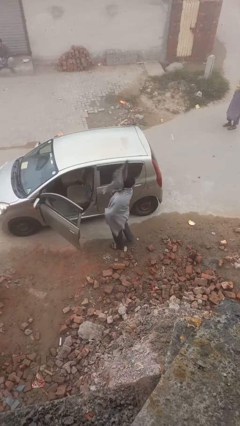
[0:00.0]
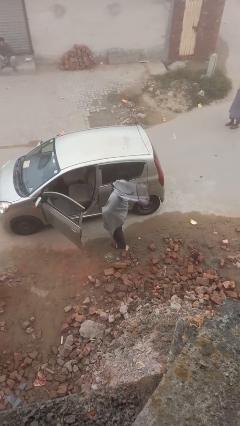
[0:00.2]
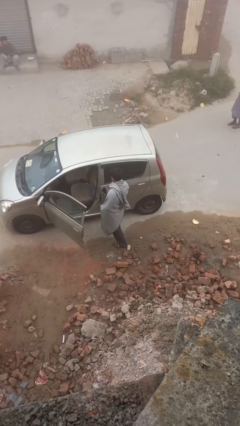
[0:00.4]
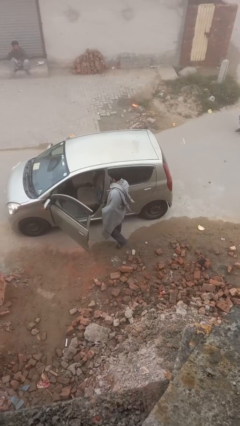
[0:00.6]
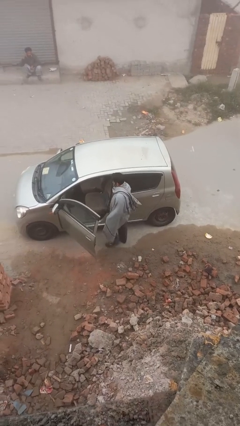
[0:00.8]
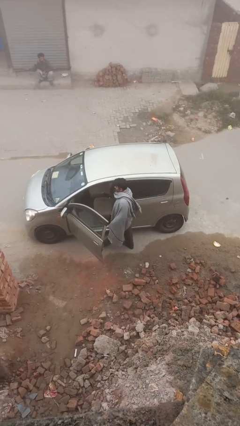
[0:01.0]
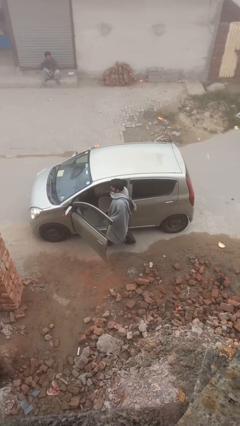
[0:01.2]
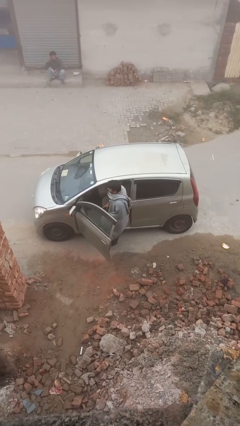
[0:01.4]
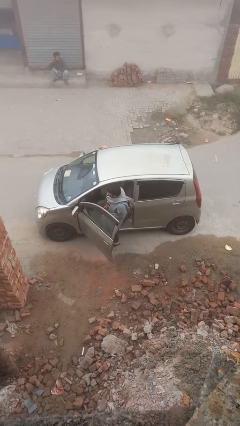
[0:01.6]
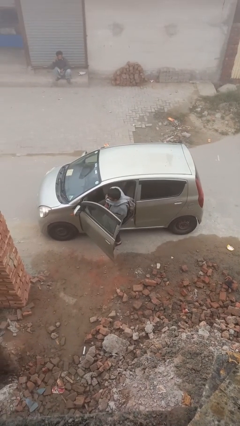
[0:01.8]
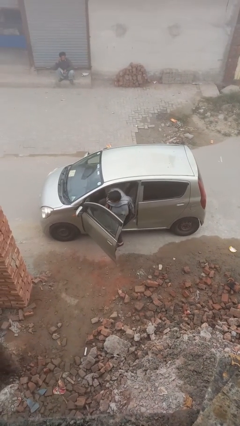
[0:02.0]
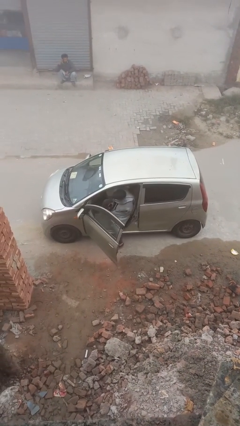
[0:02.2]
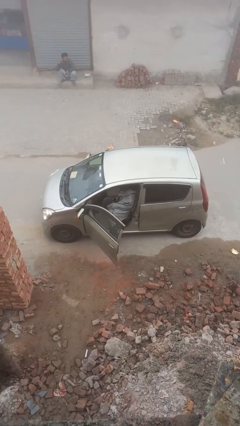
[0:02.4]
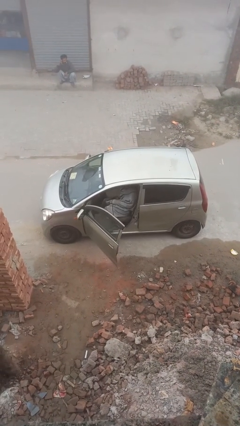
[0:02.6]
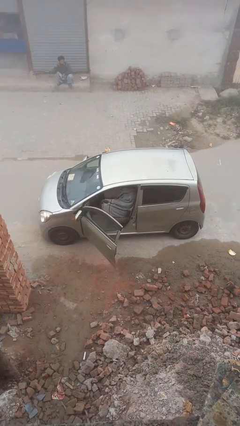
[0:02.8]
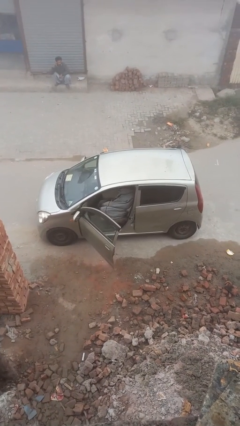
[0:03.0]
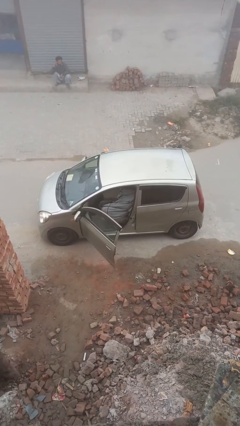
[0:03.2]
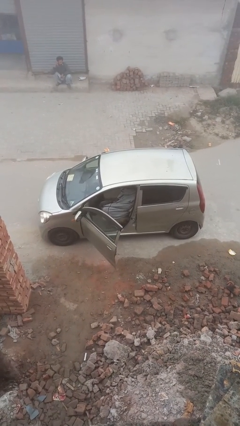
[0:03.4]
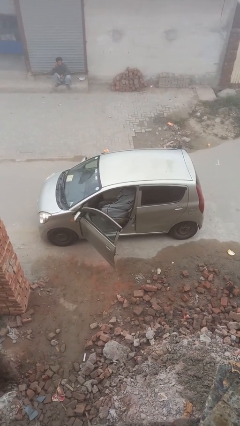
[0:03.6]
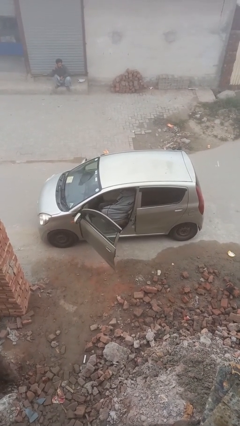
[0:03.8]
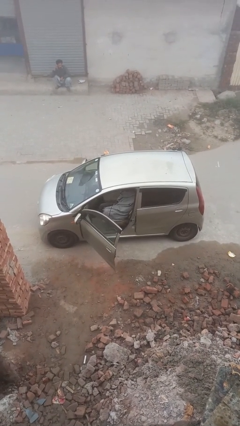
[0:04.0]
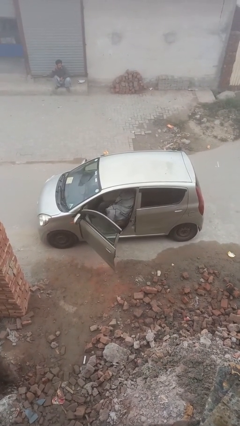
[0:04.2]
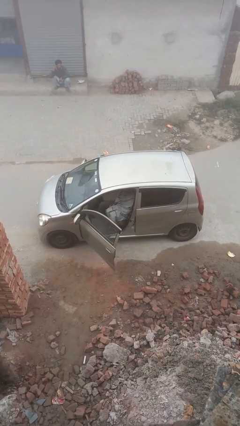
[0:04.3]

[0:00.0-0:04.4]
person enters car

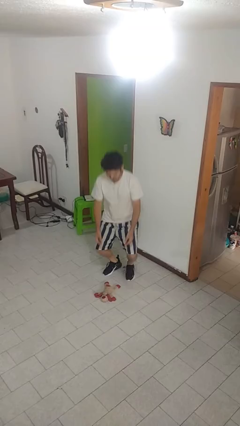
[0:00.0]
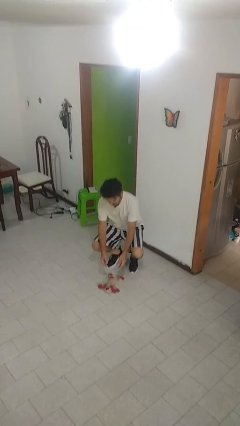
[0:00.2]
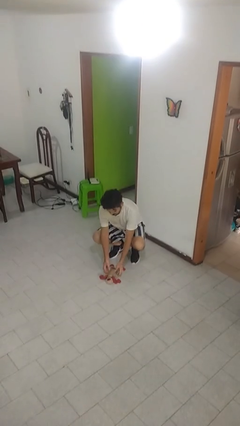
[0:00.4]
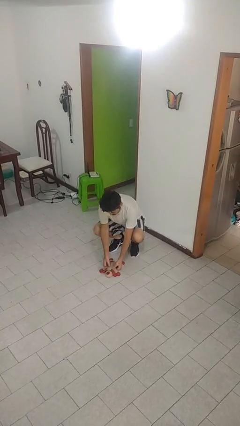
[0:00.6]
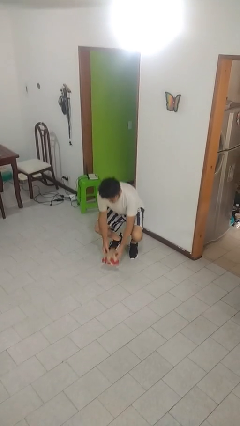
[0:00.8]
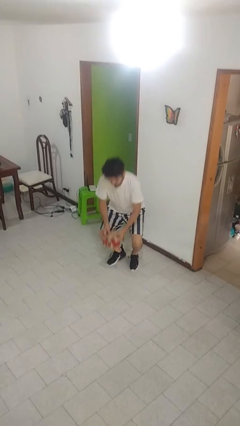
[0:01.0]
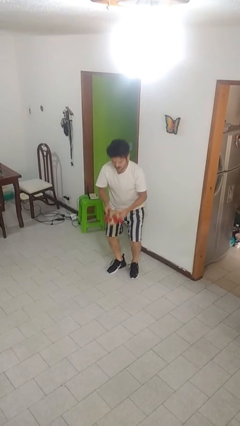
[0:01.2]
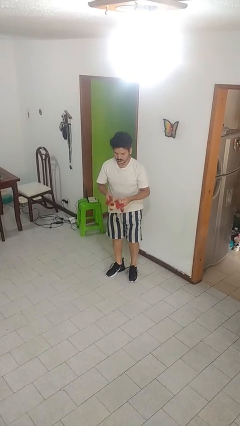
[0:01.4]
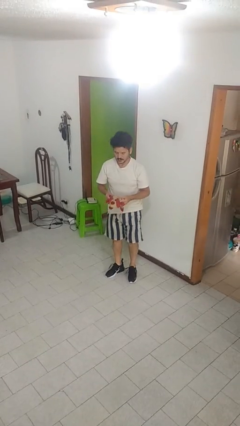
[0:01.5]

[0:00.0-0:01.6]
person picks up object from floor

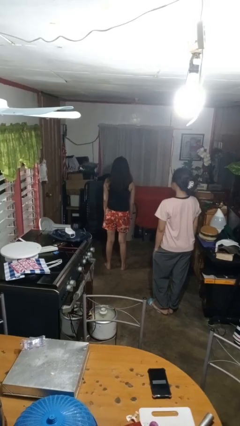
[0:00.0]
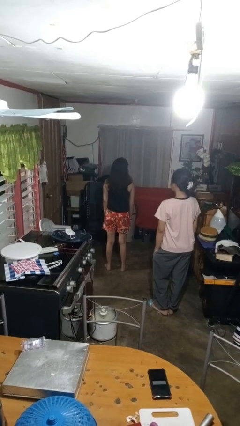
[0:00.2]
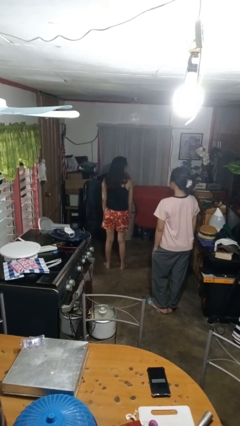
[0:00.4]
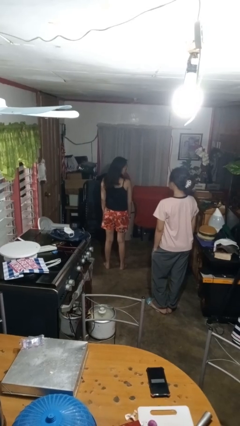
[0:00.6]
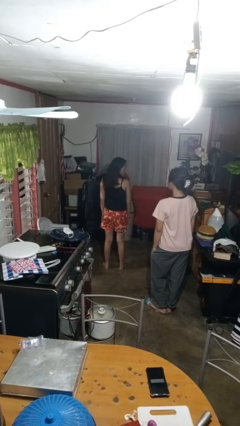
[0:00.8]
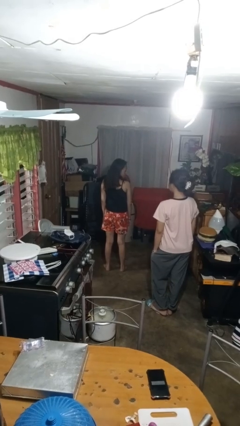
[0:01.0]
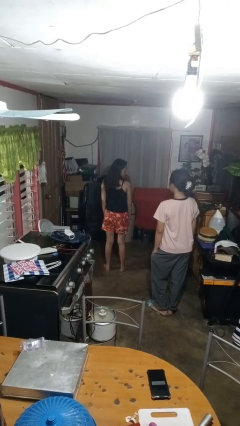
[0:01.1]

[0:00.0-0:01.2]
person looks over shoulder

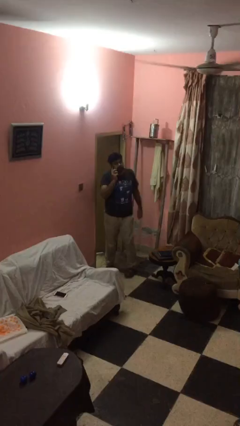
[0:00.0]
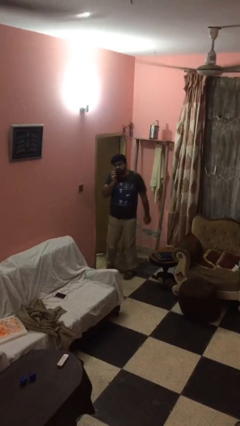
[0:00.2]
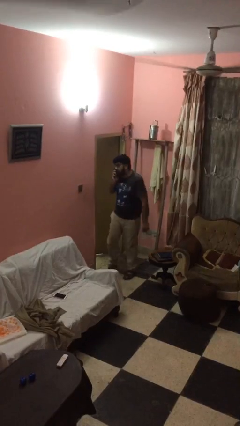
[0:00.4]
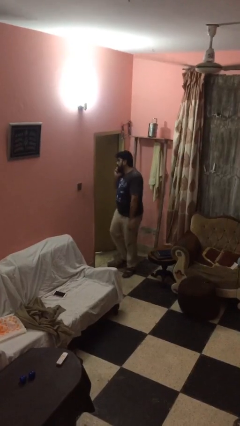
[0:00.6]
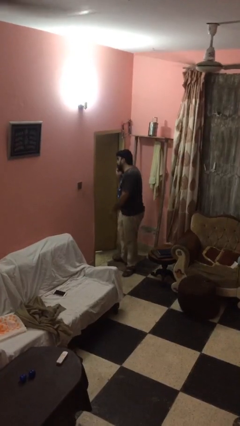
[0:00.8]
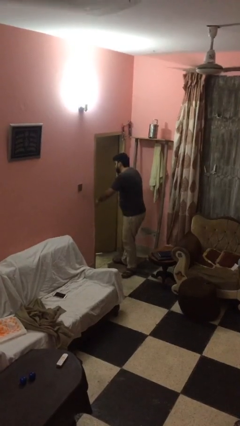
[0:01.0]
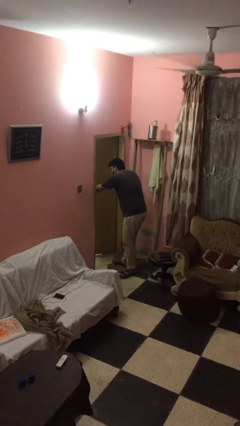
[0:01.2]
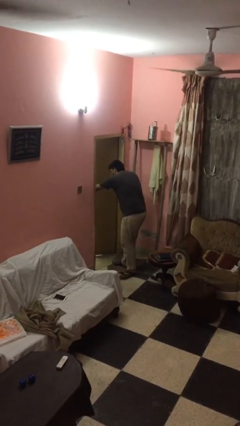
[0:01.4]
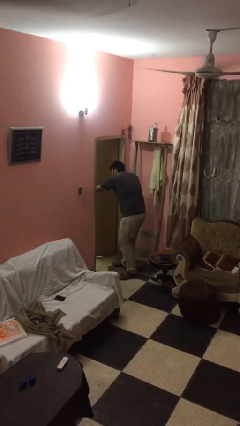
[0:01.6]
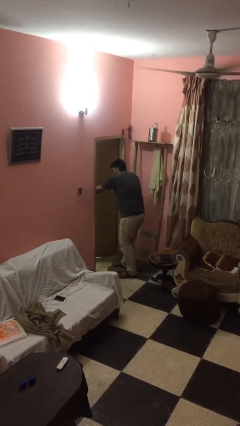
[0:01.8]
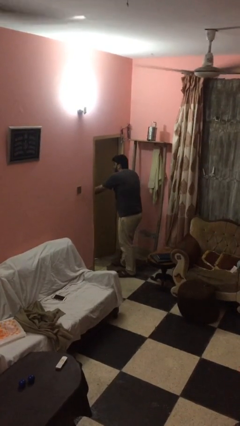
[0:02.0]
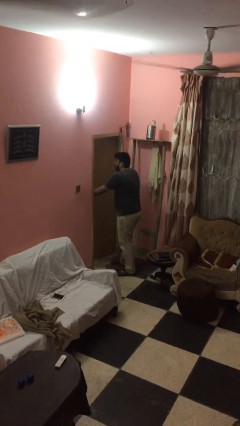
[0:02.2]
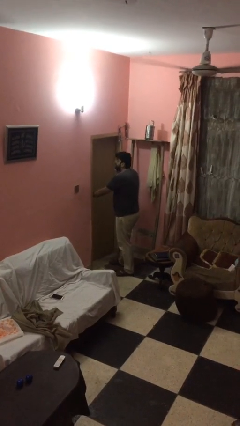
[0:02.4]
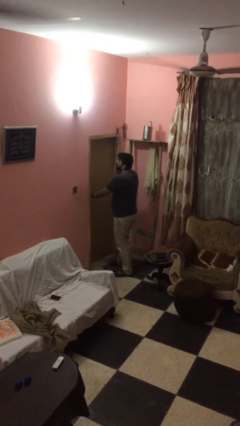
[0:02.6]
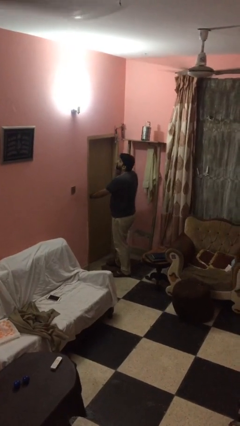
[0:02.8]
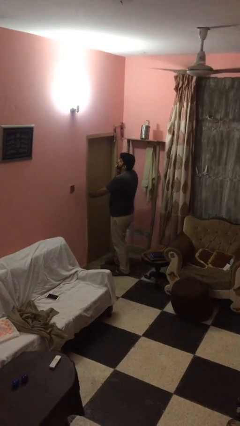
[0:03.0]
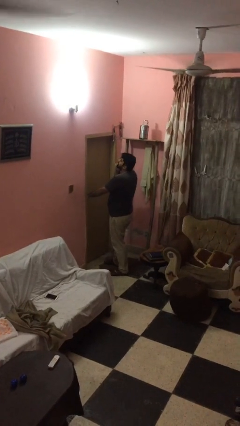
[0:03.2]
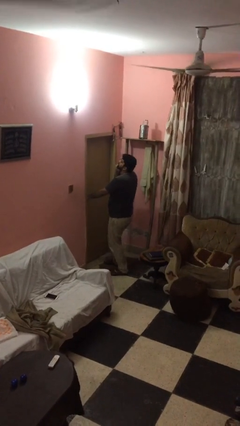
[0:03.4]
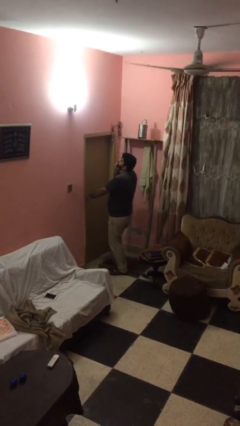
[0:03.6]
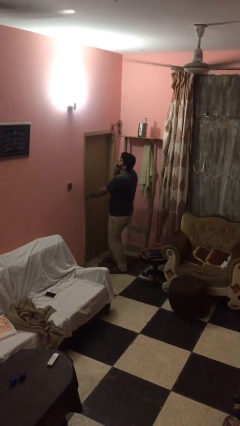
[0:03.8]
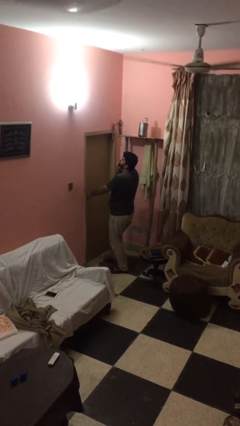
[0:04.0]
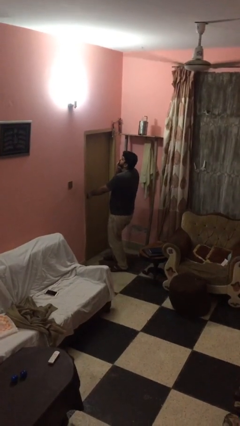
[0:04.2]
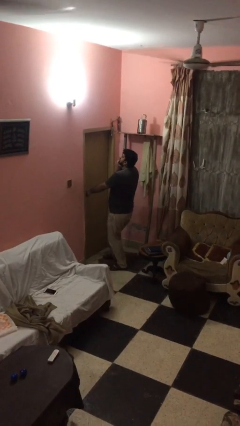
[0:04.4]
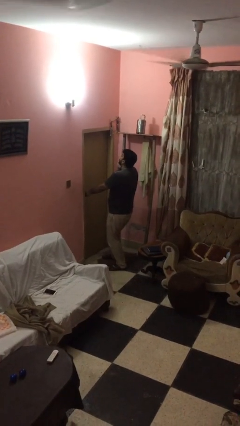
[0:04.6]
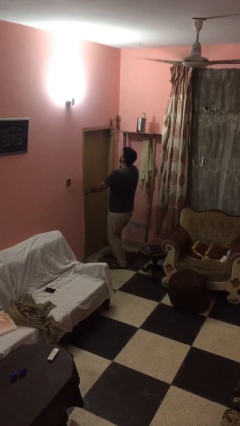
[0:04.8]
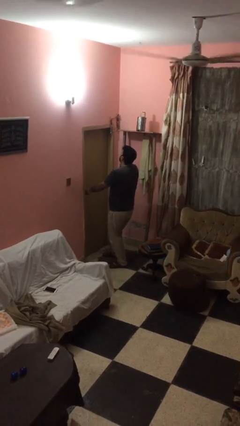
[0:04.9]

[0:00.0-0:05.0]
person closes facility door

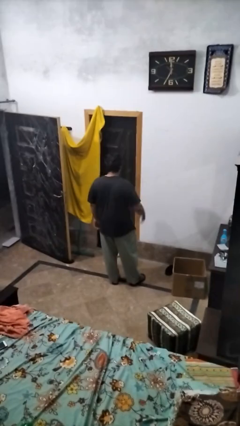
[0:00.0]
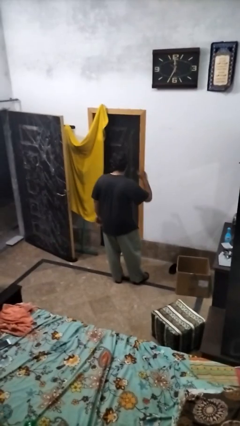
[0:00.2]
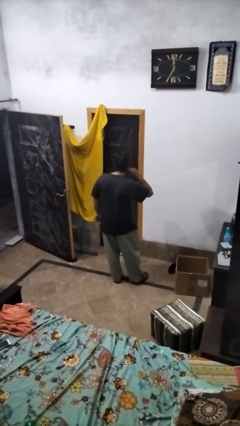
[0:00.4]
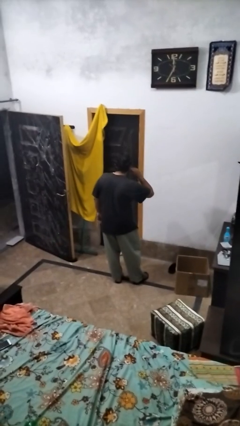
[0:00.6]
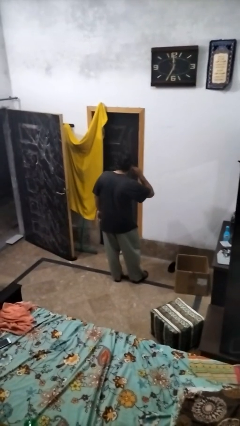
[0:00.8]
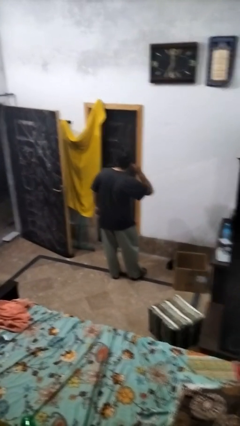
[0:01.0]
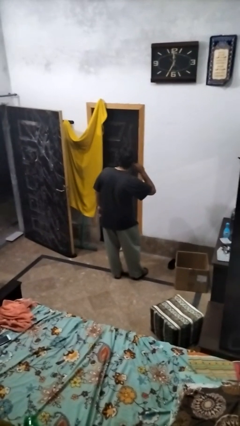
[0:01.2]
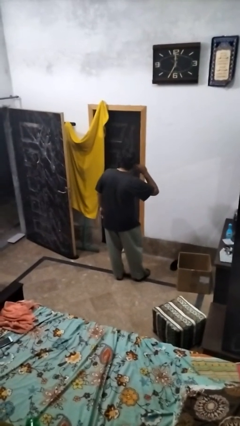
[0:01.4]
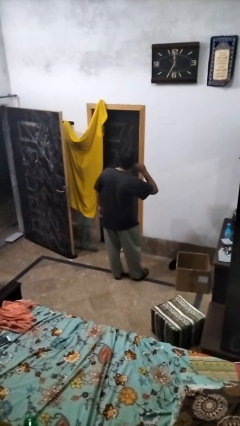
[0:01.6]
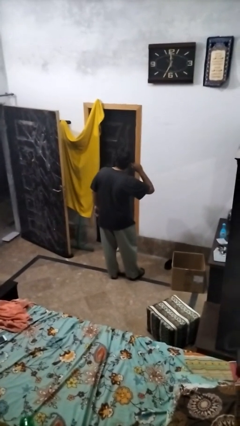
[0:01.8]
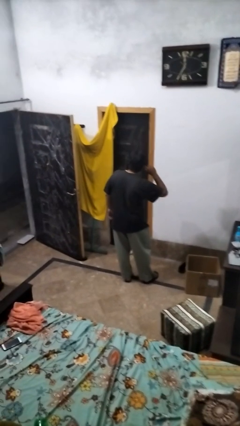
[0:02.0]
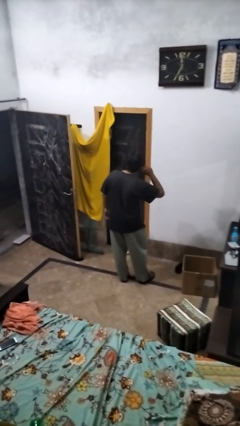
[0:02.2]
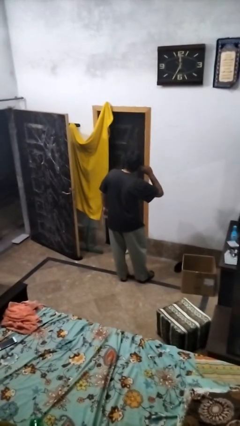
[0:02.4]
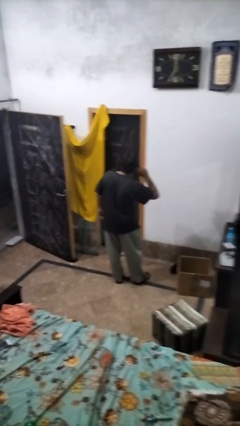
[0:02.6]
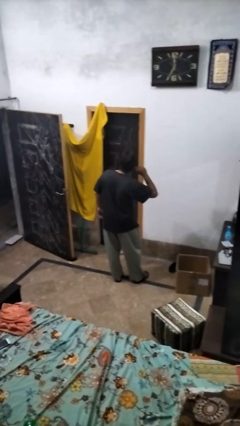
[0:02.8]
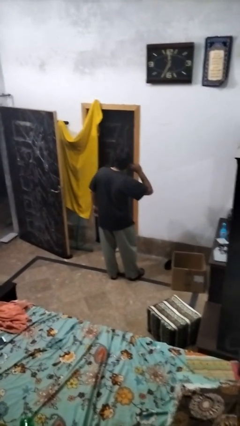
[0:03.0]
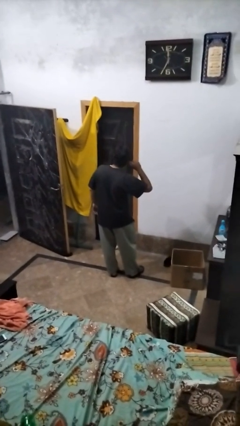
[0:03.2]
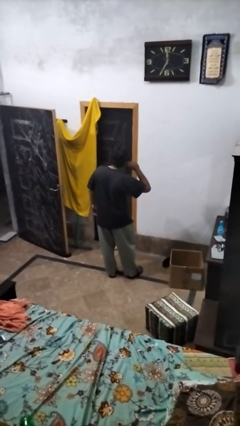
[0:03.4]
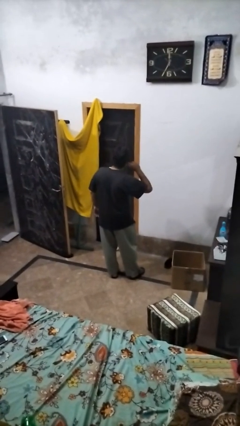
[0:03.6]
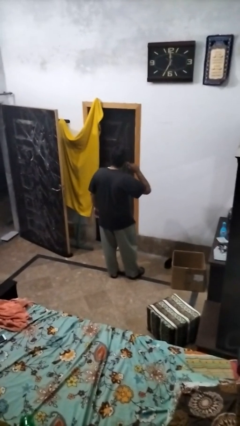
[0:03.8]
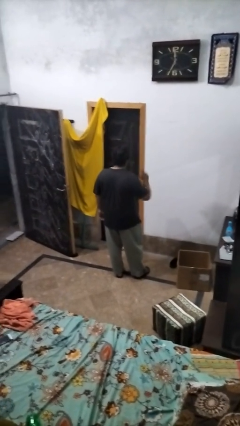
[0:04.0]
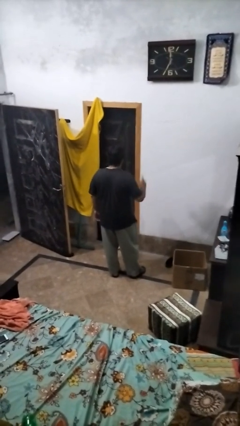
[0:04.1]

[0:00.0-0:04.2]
person gestures listen closely

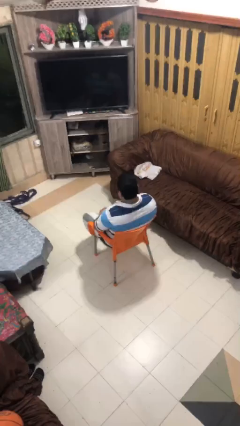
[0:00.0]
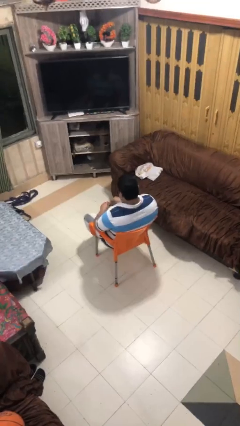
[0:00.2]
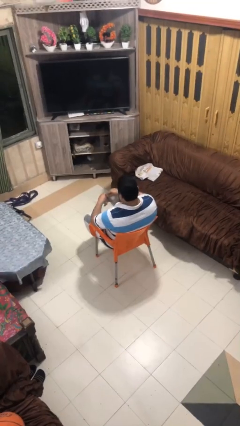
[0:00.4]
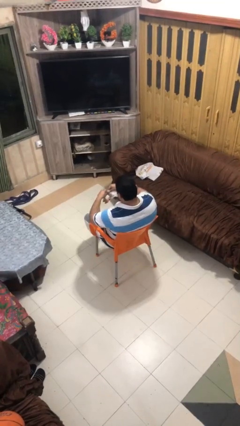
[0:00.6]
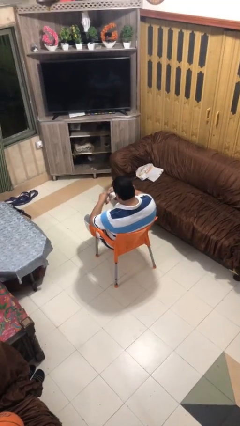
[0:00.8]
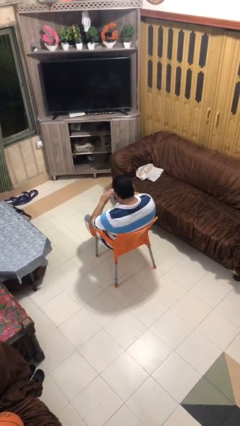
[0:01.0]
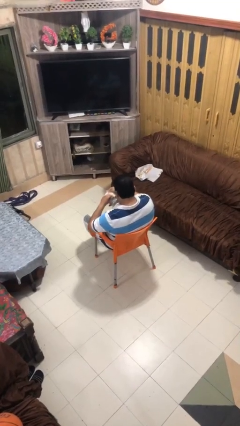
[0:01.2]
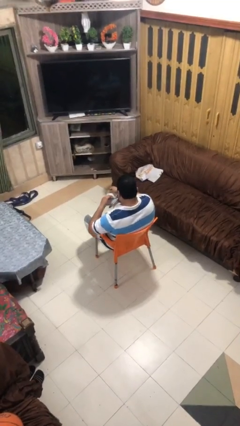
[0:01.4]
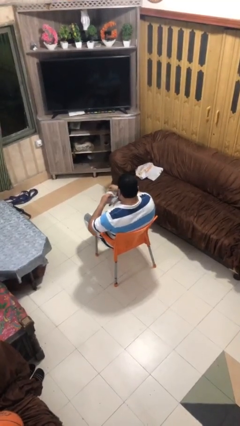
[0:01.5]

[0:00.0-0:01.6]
person tears paper
